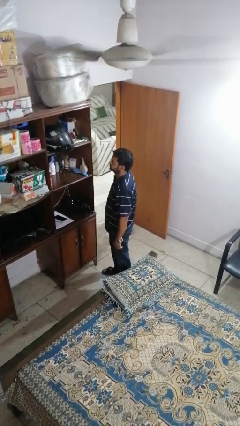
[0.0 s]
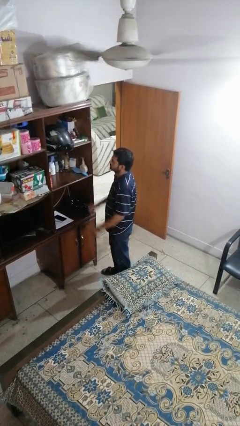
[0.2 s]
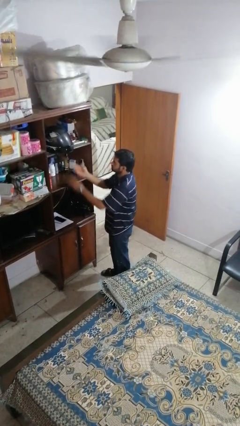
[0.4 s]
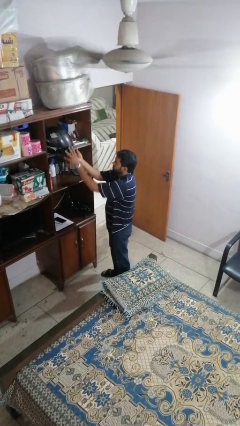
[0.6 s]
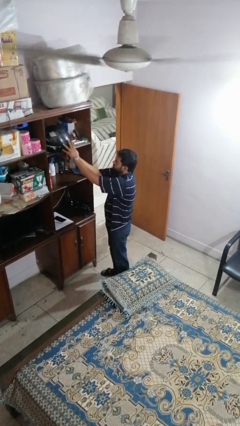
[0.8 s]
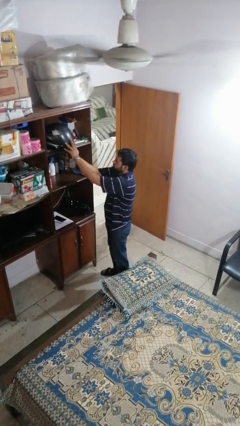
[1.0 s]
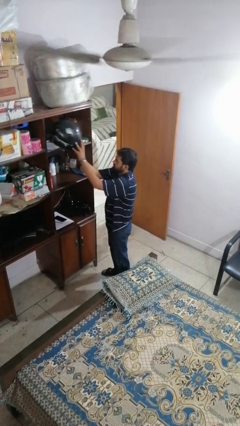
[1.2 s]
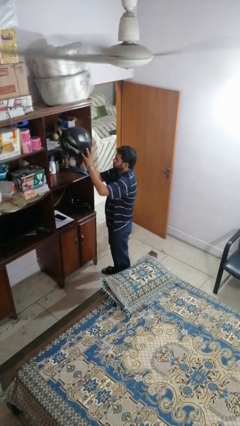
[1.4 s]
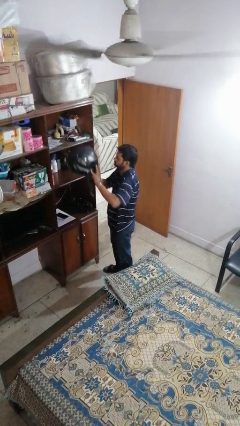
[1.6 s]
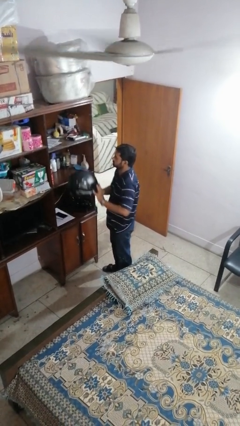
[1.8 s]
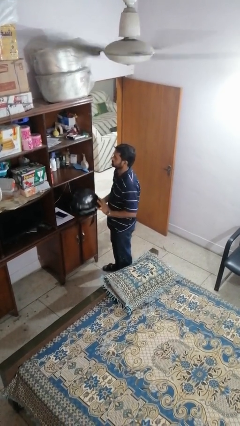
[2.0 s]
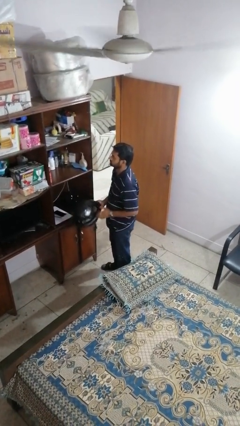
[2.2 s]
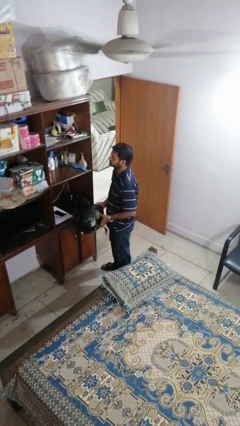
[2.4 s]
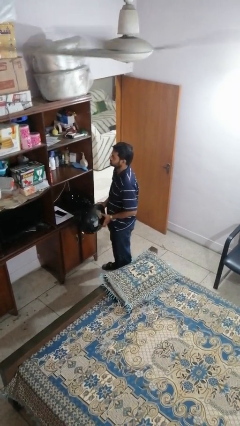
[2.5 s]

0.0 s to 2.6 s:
person picks up object from shelf

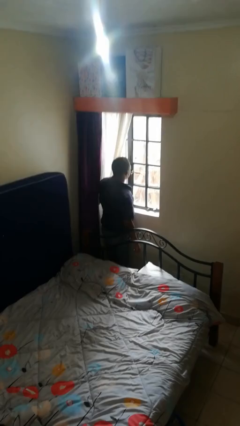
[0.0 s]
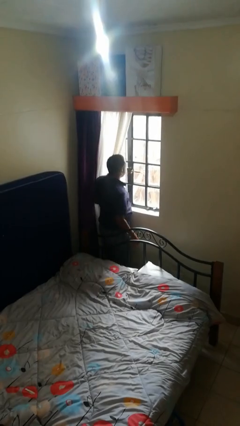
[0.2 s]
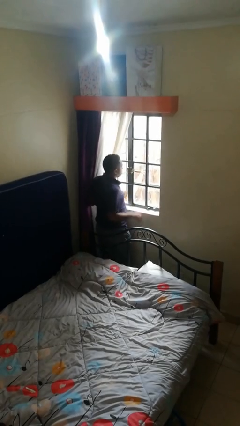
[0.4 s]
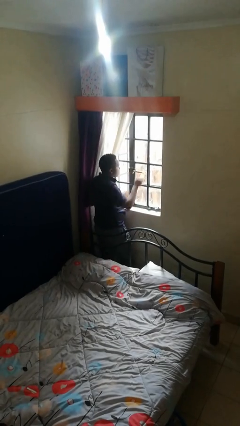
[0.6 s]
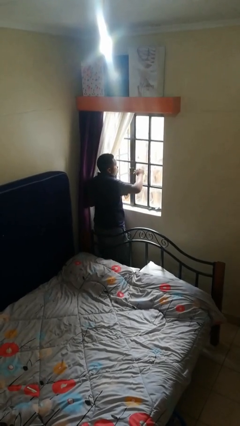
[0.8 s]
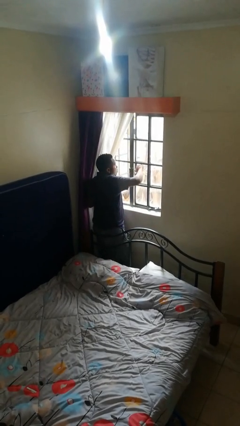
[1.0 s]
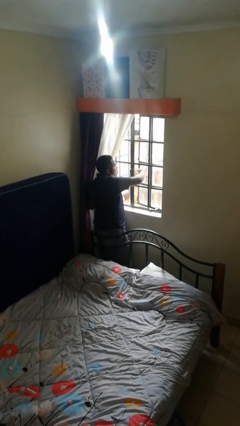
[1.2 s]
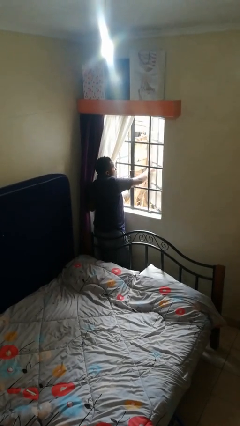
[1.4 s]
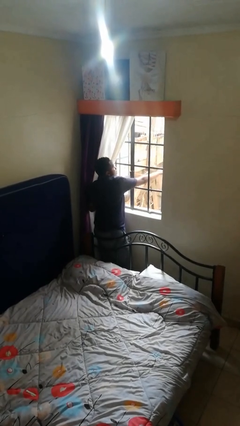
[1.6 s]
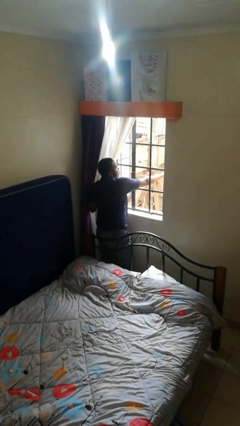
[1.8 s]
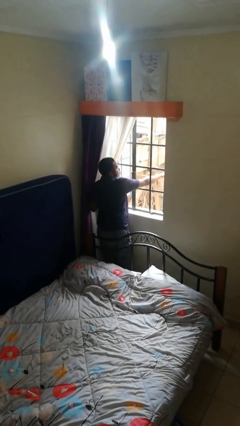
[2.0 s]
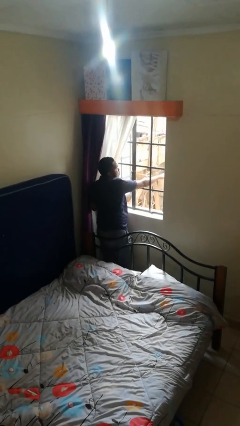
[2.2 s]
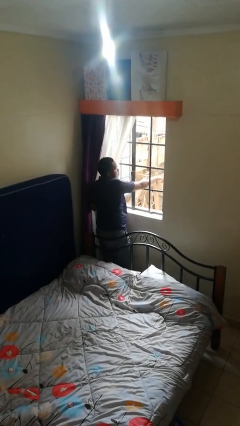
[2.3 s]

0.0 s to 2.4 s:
person opens home window

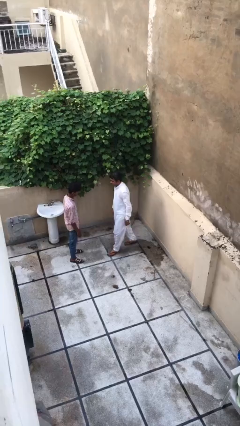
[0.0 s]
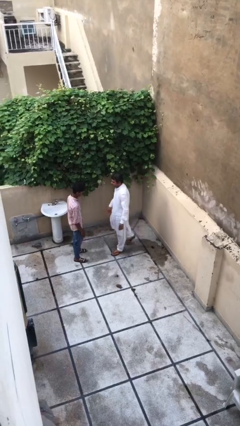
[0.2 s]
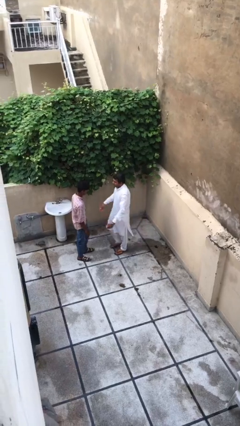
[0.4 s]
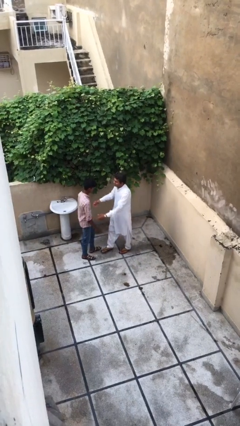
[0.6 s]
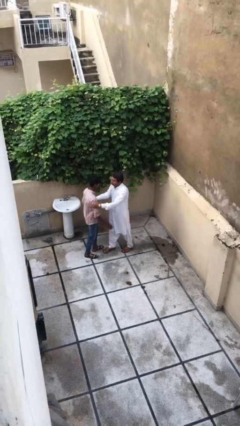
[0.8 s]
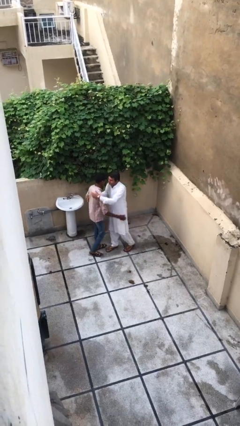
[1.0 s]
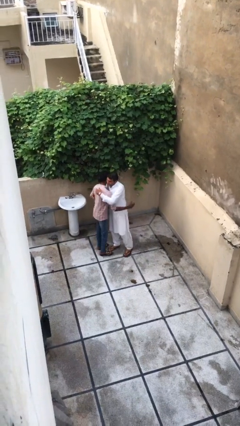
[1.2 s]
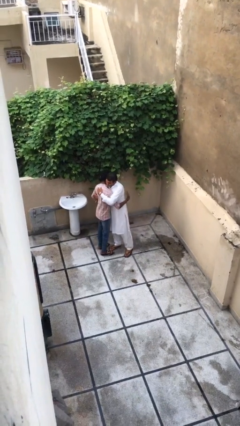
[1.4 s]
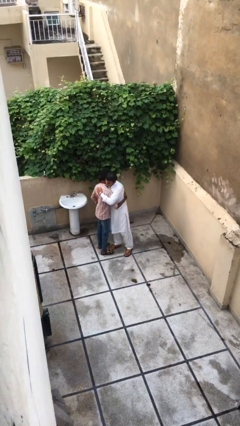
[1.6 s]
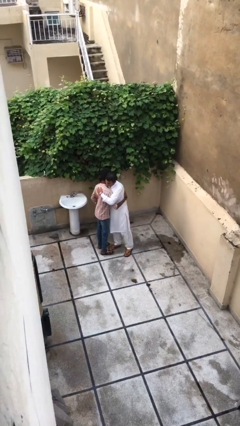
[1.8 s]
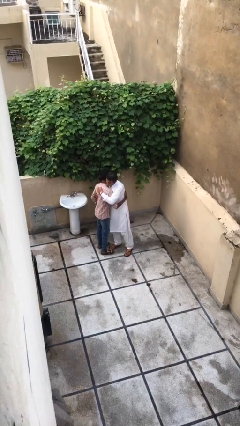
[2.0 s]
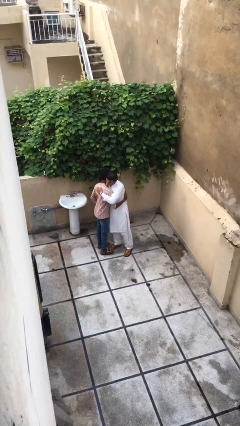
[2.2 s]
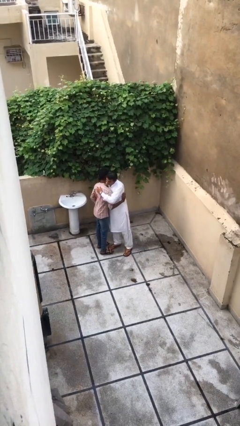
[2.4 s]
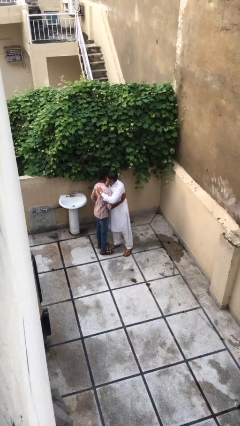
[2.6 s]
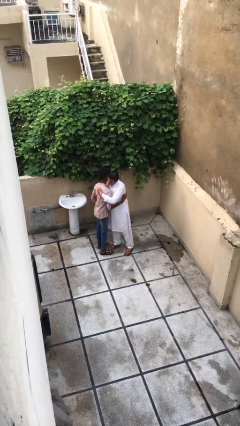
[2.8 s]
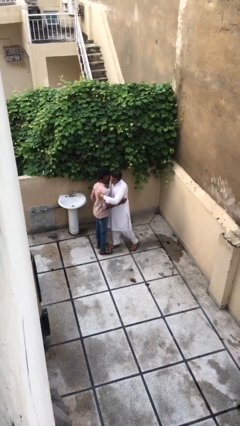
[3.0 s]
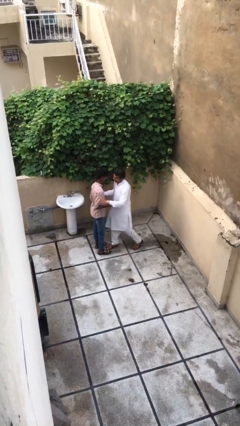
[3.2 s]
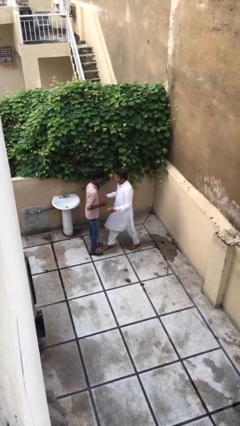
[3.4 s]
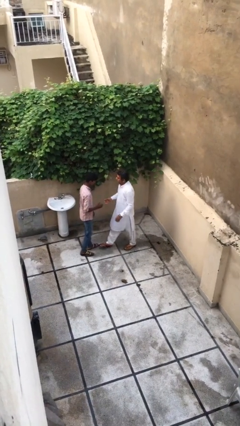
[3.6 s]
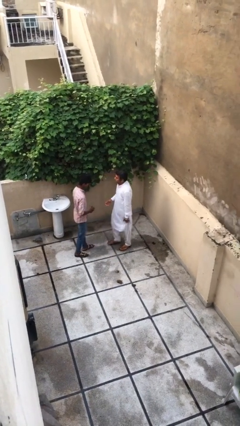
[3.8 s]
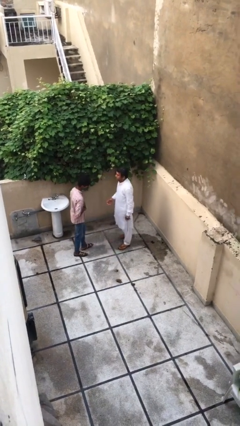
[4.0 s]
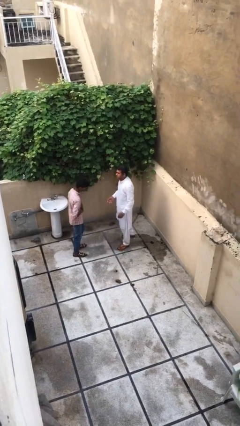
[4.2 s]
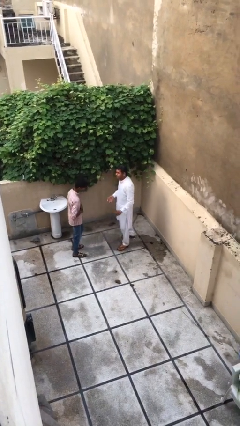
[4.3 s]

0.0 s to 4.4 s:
person embraces person

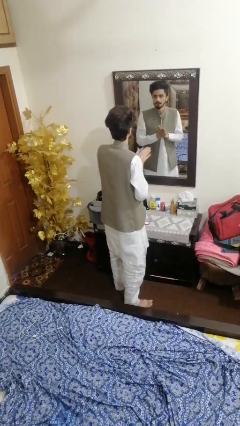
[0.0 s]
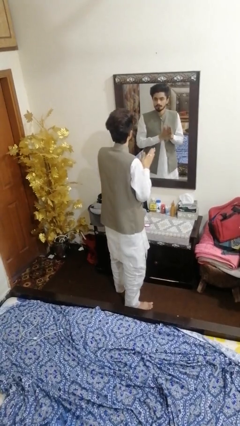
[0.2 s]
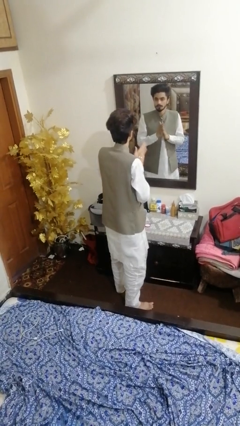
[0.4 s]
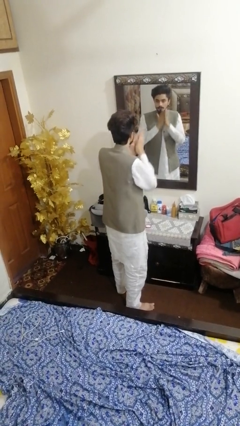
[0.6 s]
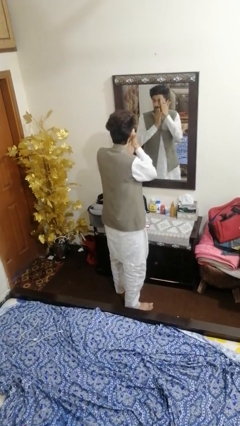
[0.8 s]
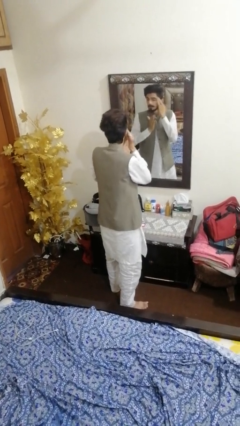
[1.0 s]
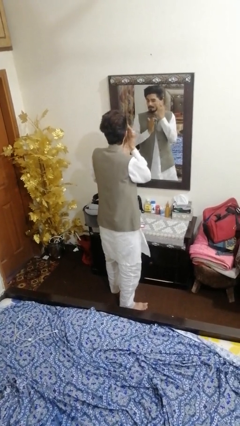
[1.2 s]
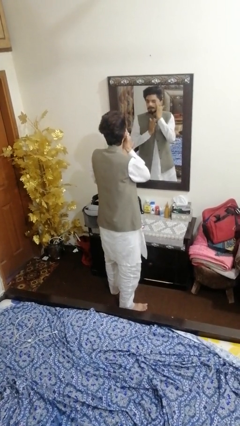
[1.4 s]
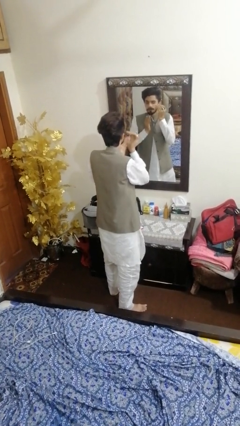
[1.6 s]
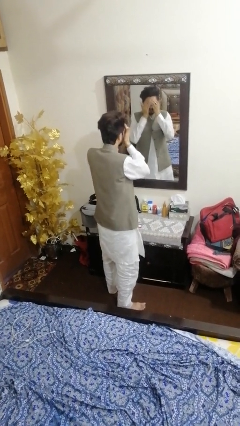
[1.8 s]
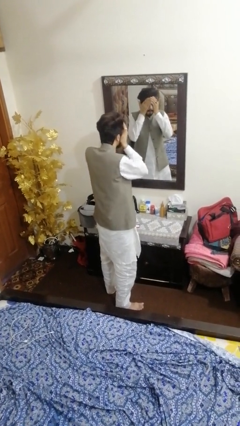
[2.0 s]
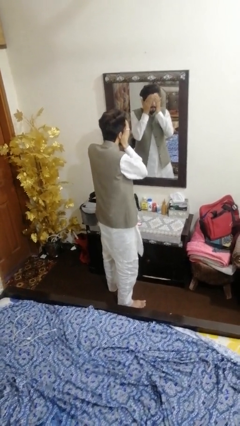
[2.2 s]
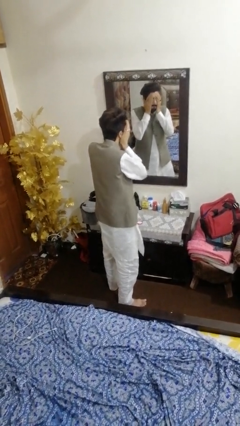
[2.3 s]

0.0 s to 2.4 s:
person applies foundation makeup

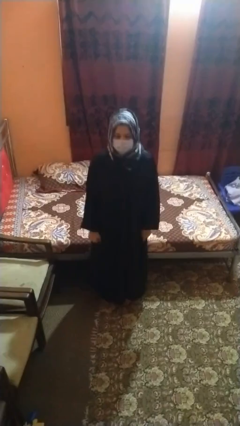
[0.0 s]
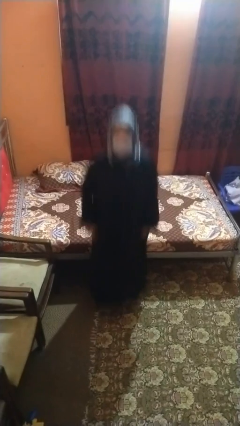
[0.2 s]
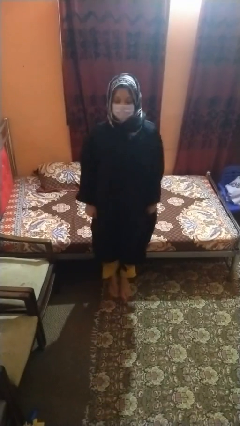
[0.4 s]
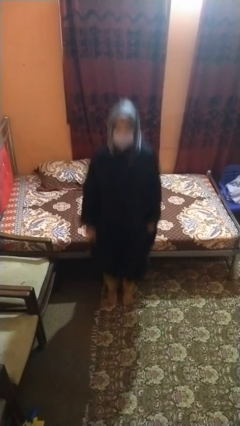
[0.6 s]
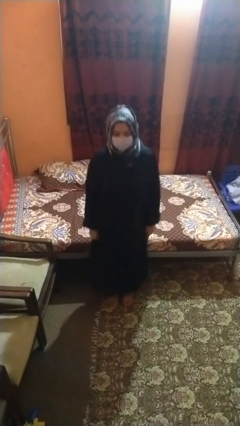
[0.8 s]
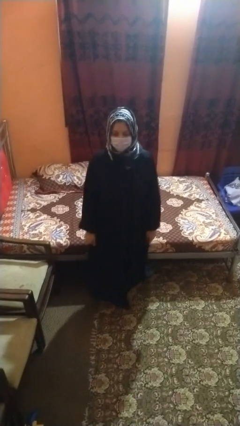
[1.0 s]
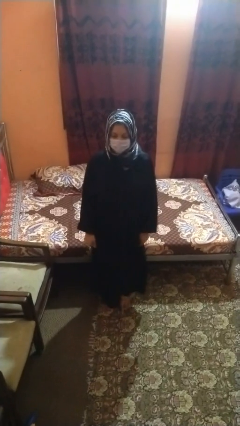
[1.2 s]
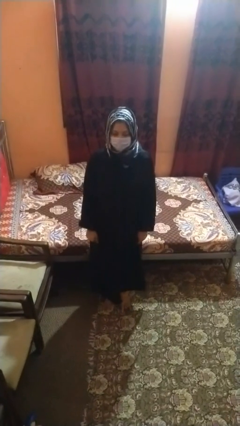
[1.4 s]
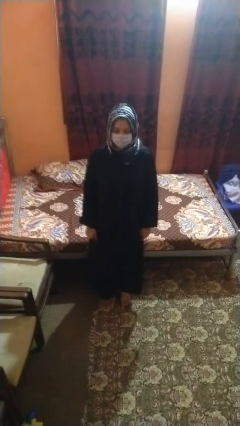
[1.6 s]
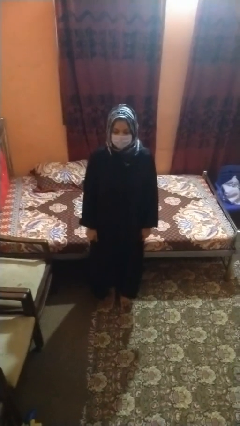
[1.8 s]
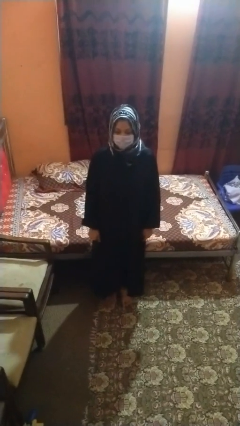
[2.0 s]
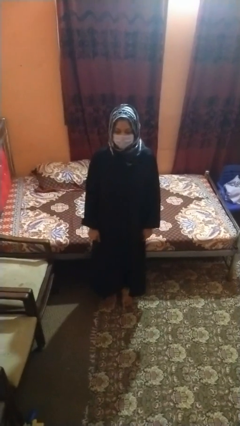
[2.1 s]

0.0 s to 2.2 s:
person jumps

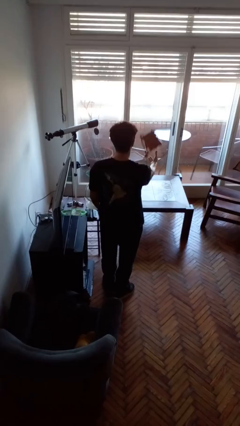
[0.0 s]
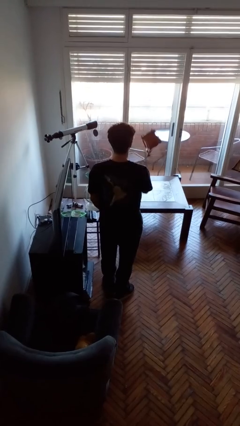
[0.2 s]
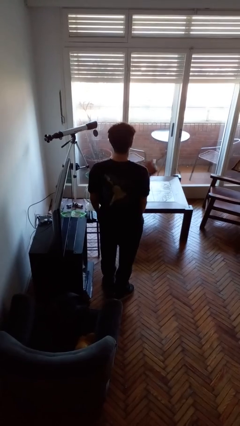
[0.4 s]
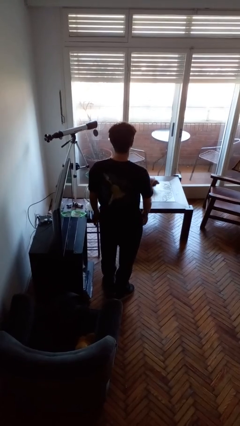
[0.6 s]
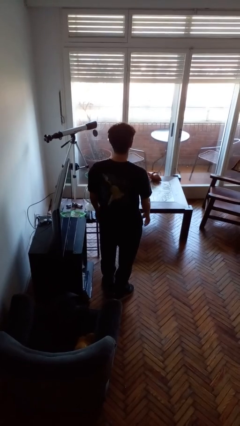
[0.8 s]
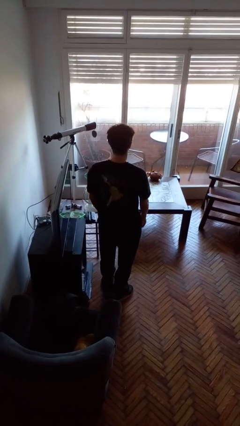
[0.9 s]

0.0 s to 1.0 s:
person throws object on table

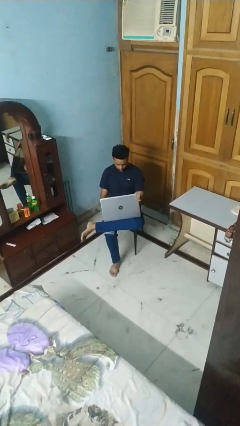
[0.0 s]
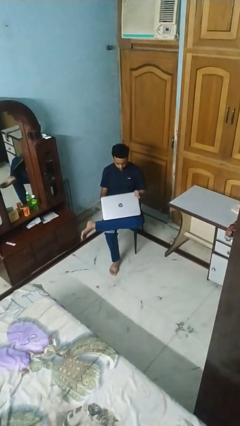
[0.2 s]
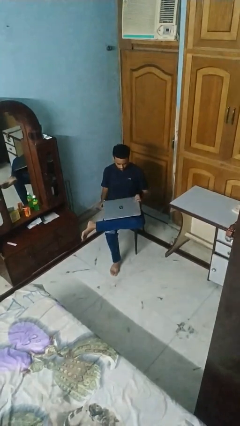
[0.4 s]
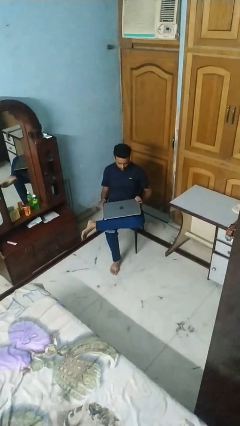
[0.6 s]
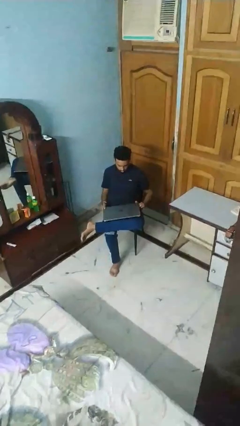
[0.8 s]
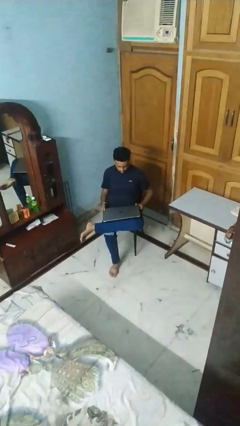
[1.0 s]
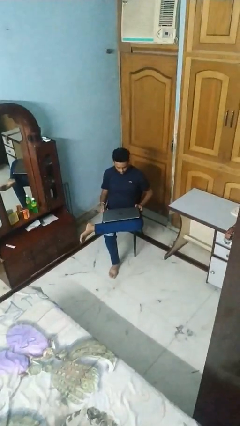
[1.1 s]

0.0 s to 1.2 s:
person closes laptop

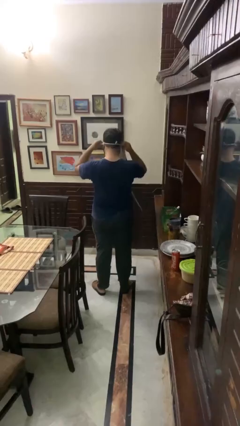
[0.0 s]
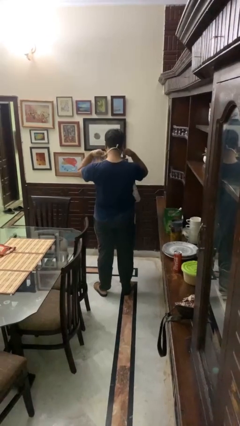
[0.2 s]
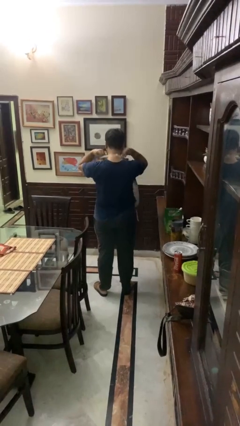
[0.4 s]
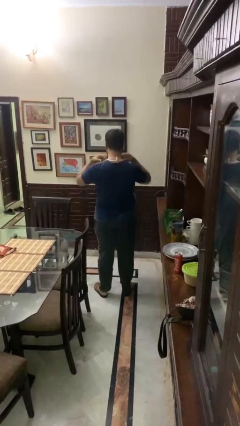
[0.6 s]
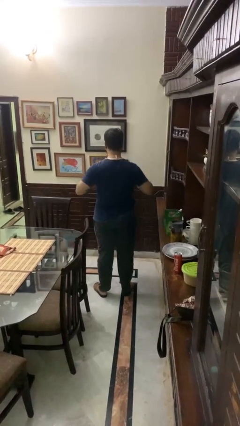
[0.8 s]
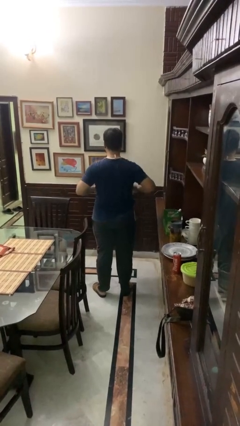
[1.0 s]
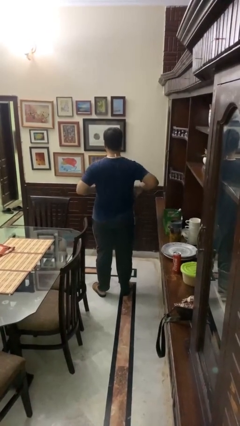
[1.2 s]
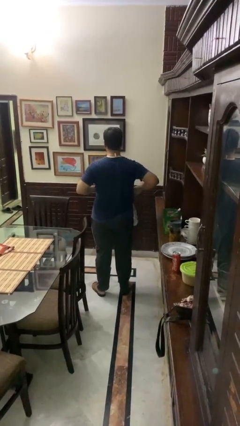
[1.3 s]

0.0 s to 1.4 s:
person puts on apron
